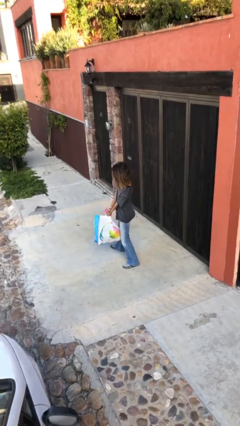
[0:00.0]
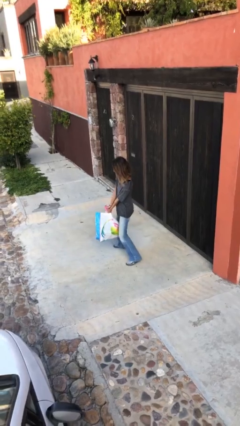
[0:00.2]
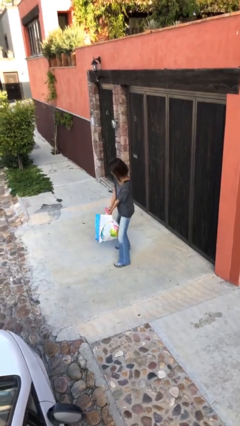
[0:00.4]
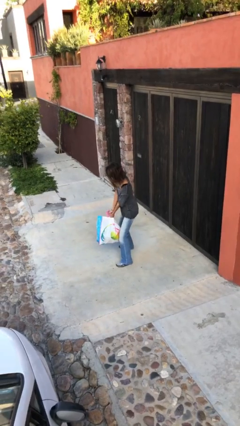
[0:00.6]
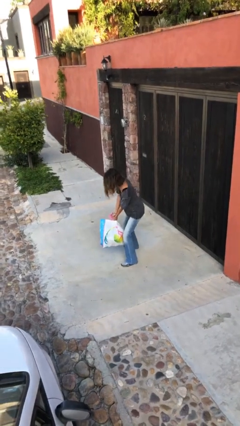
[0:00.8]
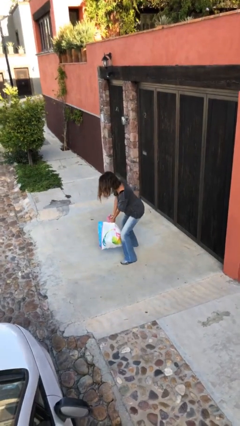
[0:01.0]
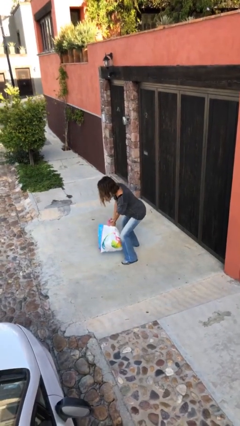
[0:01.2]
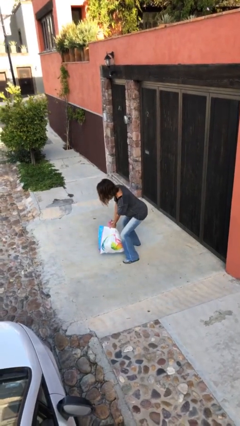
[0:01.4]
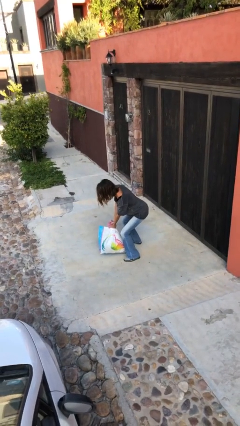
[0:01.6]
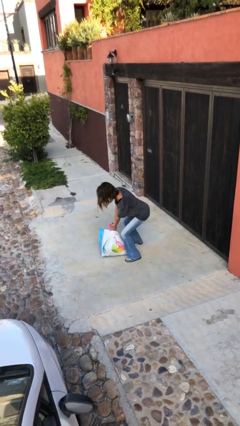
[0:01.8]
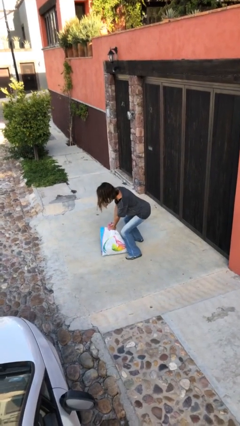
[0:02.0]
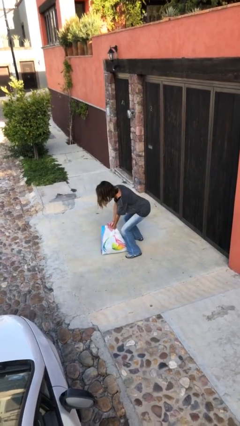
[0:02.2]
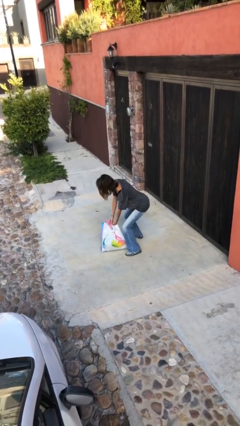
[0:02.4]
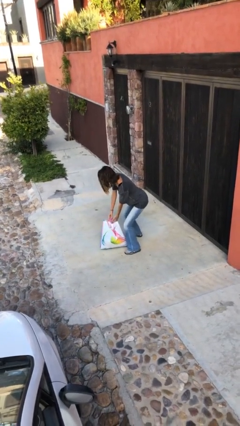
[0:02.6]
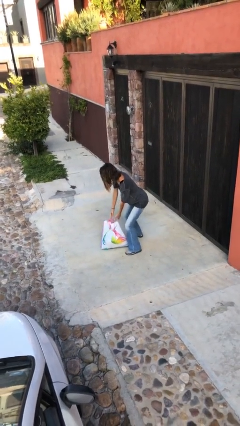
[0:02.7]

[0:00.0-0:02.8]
person puts down object on floor

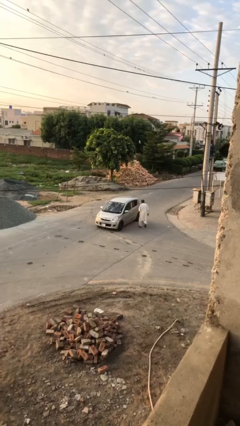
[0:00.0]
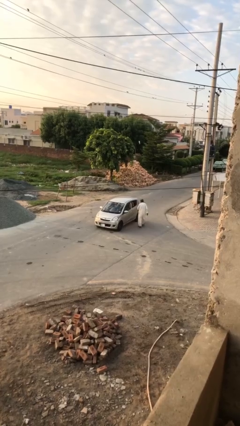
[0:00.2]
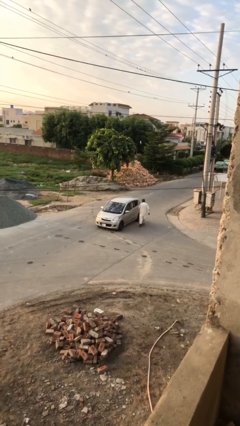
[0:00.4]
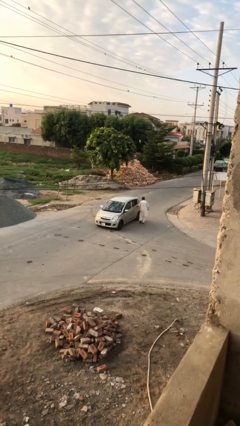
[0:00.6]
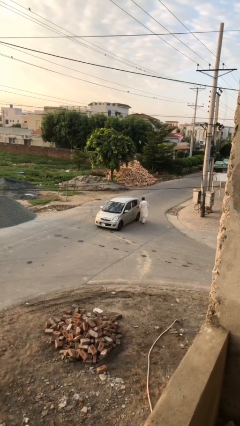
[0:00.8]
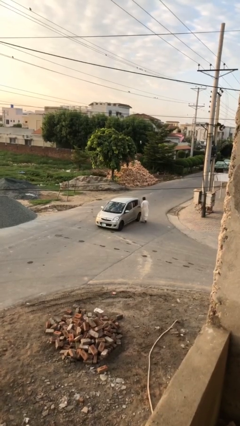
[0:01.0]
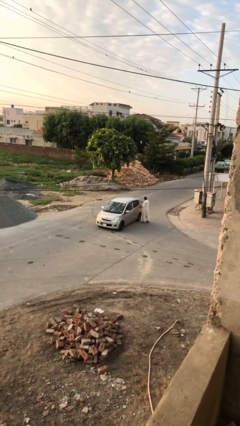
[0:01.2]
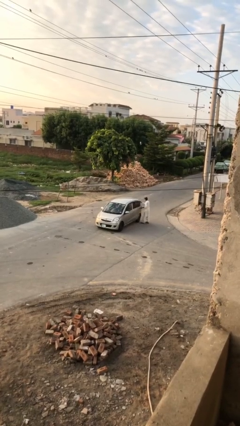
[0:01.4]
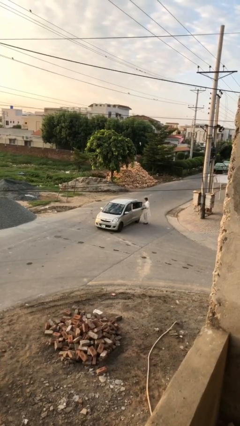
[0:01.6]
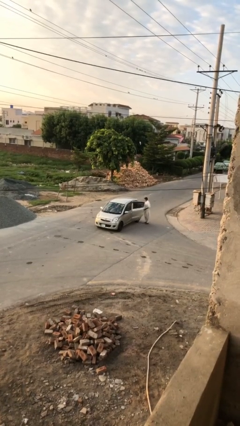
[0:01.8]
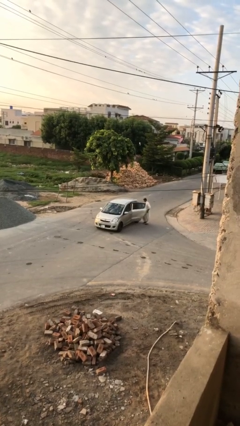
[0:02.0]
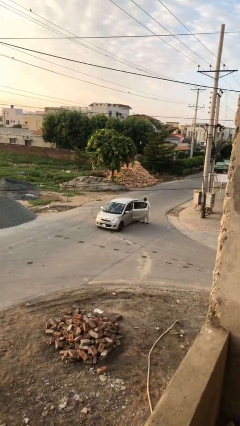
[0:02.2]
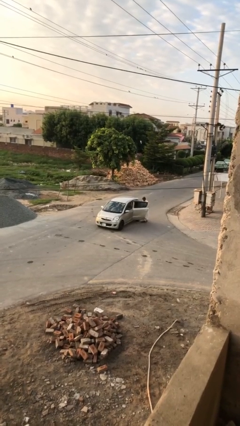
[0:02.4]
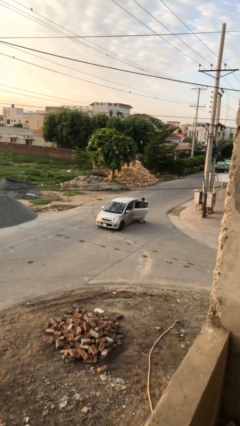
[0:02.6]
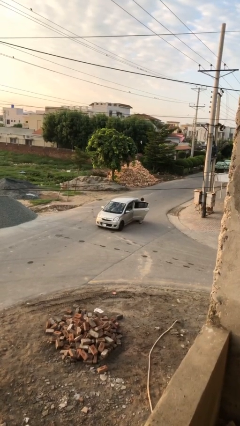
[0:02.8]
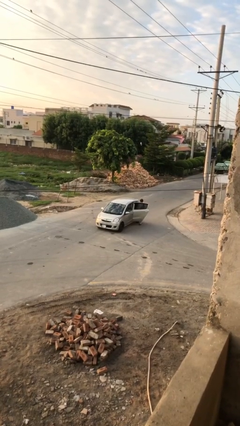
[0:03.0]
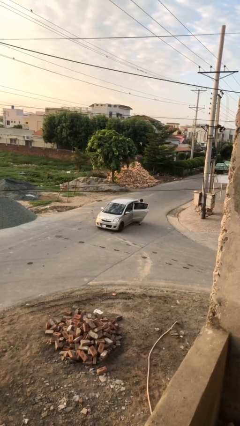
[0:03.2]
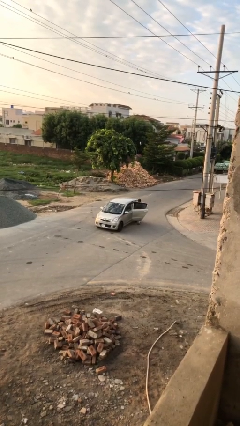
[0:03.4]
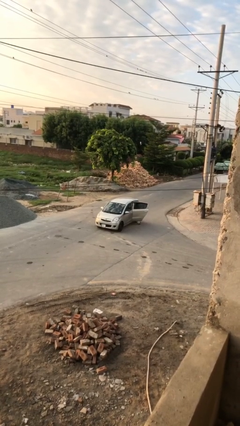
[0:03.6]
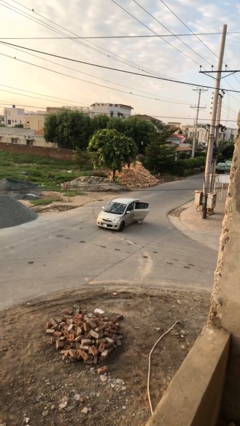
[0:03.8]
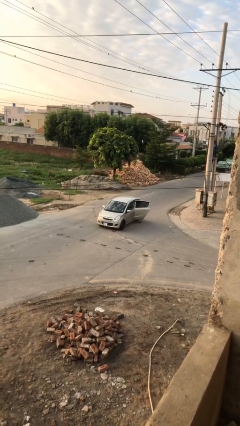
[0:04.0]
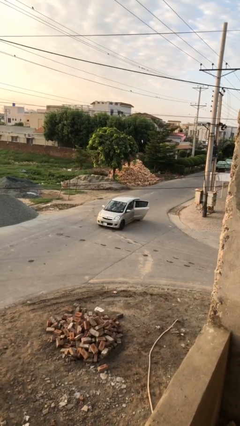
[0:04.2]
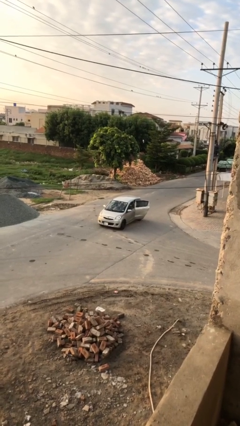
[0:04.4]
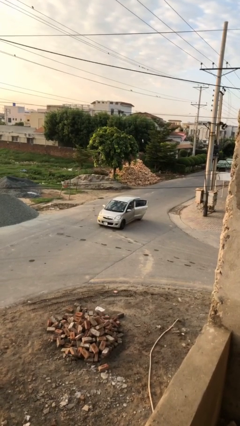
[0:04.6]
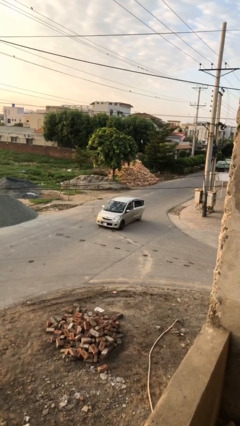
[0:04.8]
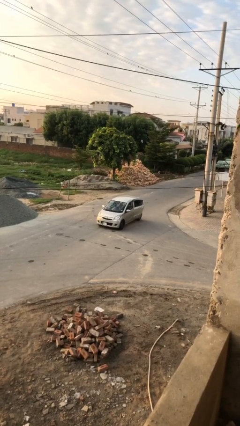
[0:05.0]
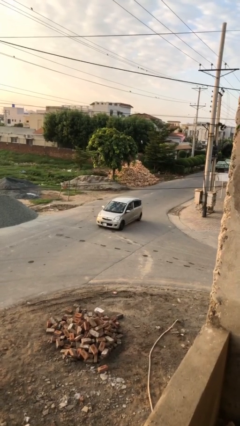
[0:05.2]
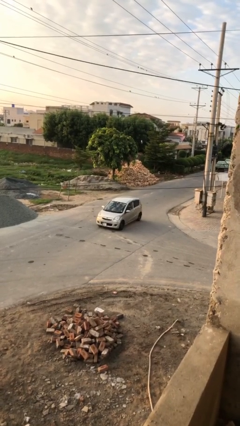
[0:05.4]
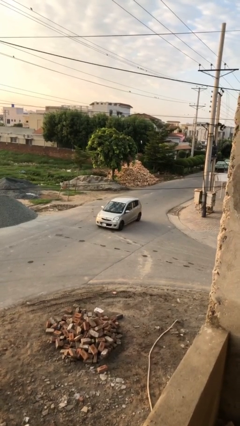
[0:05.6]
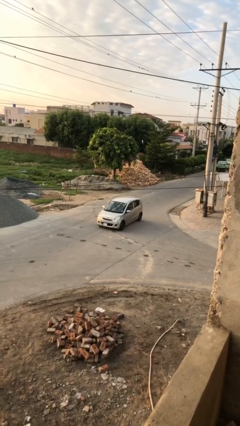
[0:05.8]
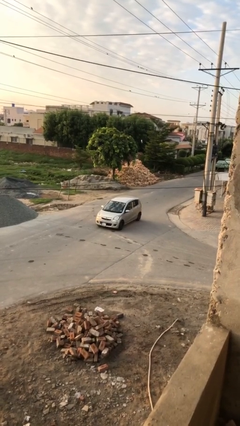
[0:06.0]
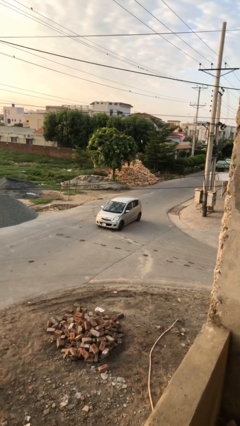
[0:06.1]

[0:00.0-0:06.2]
car picks up person

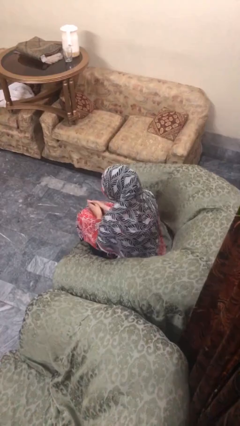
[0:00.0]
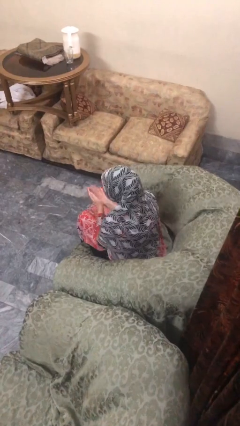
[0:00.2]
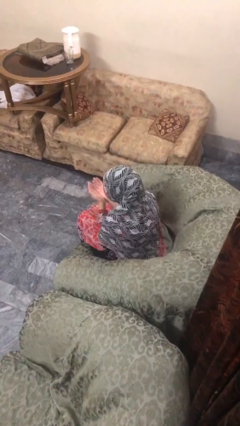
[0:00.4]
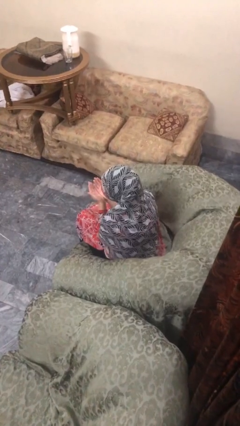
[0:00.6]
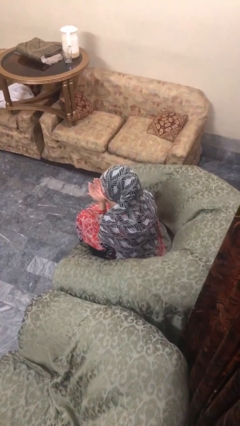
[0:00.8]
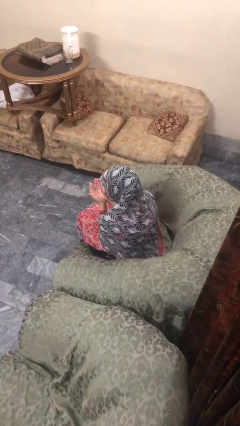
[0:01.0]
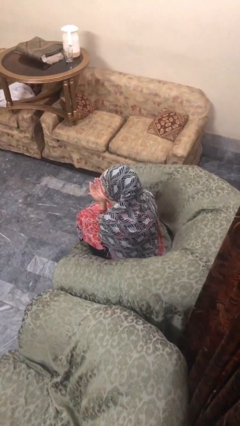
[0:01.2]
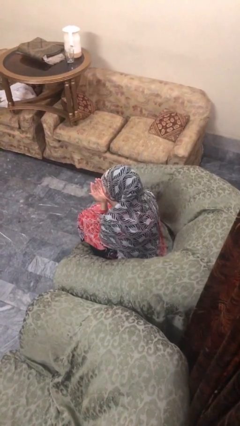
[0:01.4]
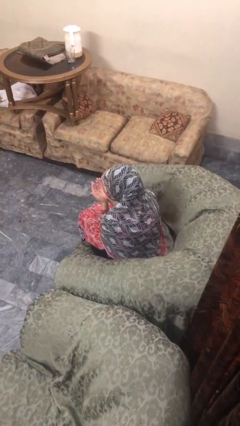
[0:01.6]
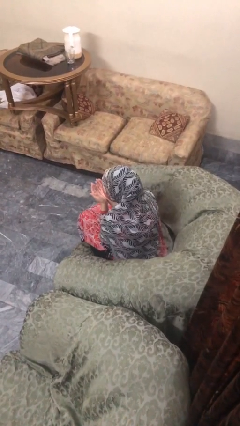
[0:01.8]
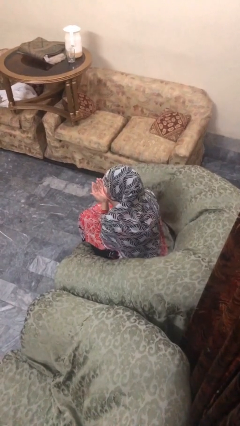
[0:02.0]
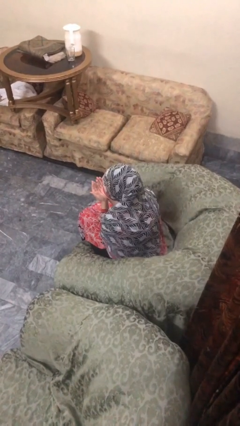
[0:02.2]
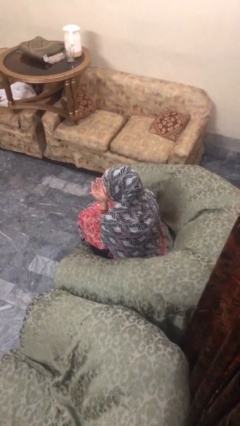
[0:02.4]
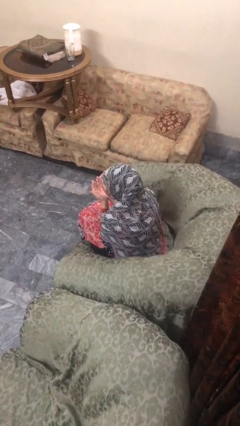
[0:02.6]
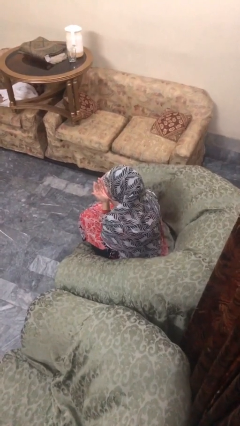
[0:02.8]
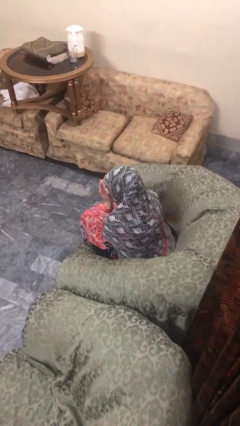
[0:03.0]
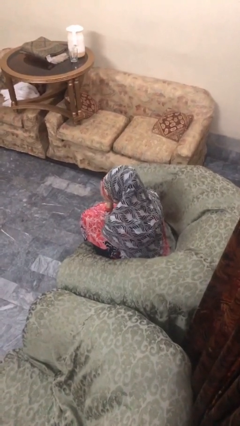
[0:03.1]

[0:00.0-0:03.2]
person prays

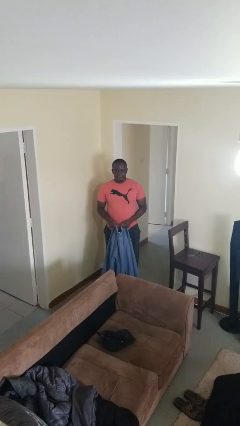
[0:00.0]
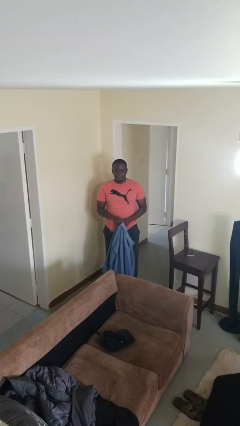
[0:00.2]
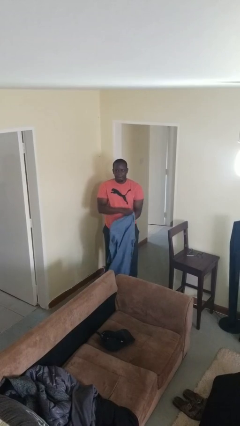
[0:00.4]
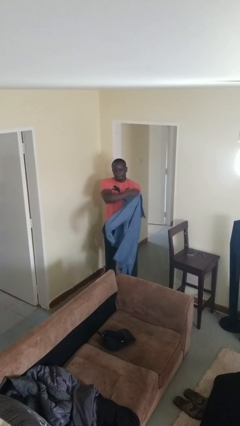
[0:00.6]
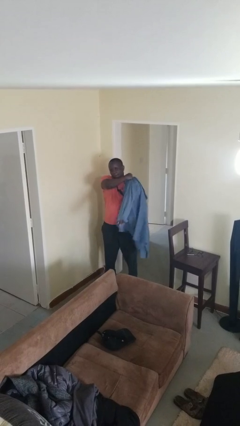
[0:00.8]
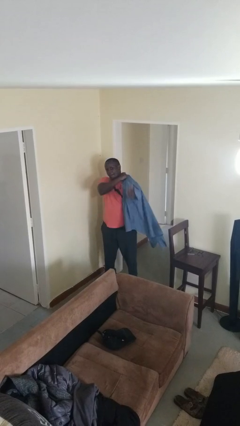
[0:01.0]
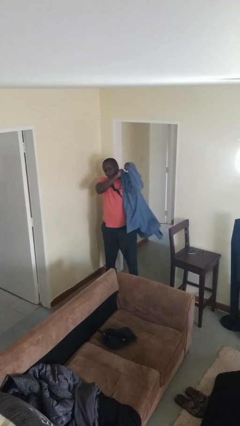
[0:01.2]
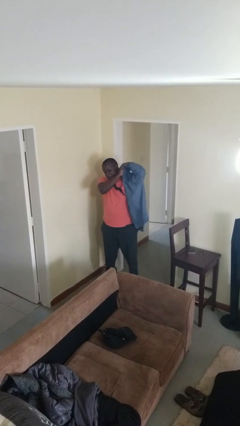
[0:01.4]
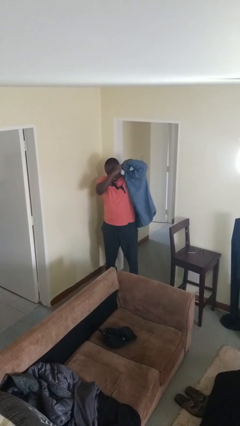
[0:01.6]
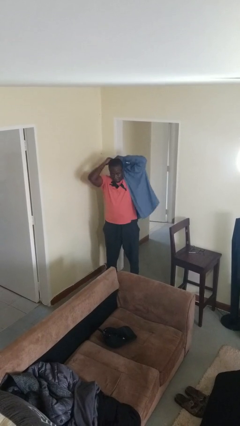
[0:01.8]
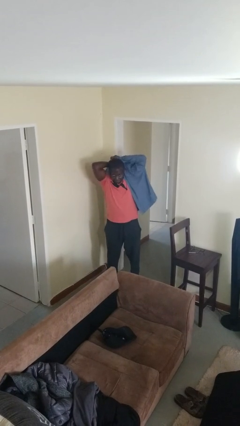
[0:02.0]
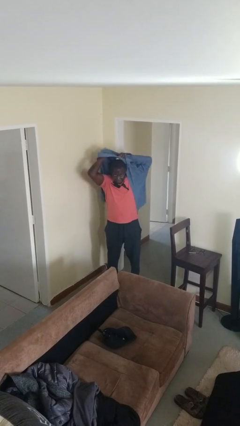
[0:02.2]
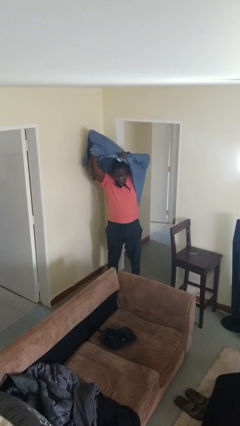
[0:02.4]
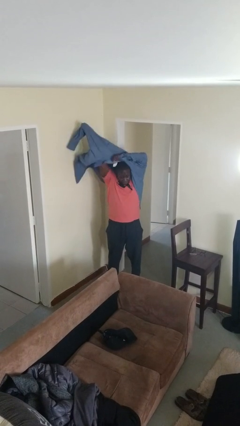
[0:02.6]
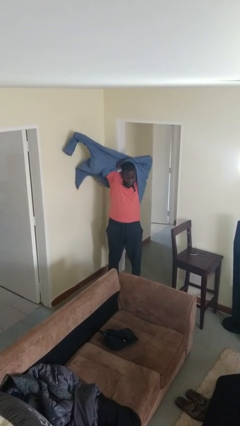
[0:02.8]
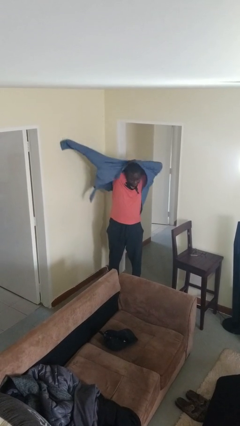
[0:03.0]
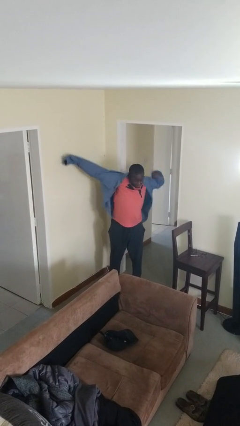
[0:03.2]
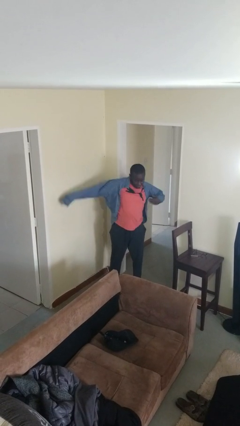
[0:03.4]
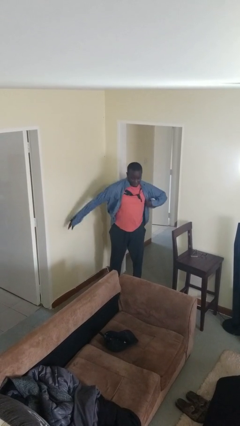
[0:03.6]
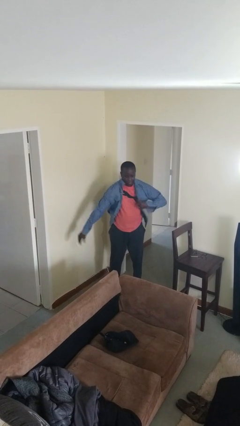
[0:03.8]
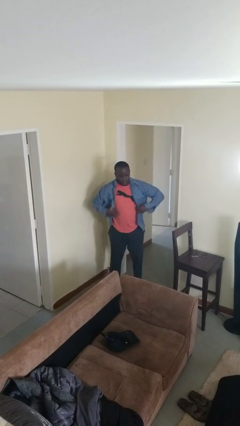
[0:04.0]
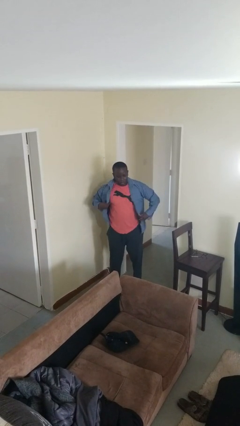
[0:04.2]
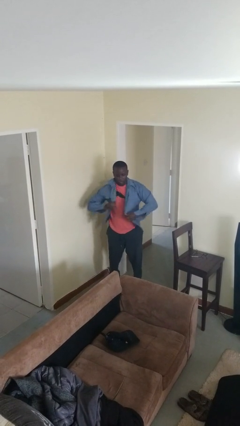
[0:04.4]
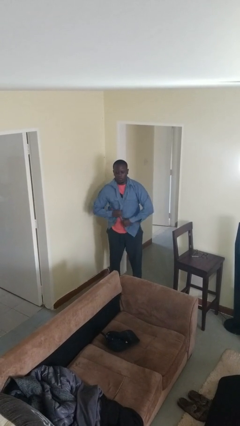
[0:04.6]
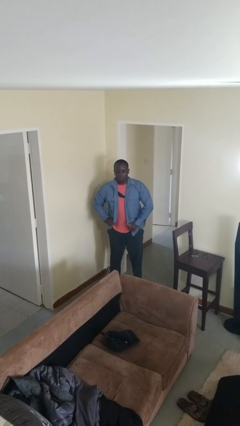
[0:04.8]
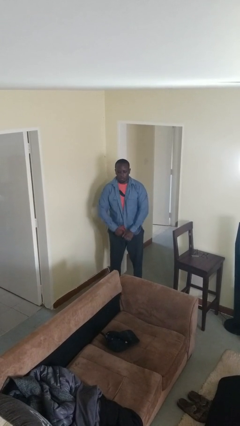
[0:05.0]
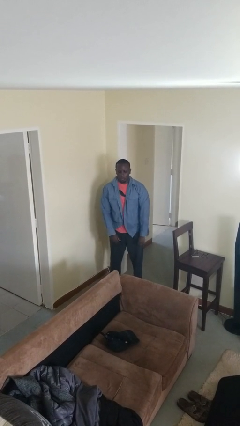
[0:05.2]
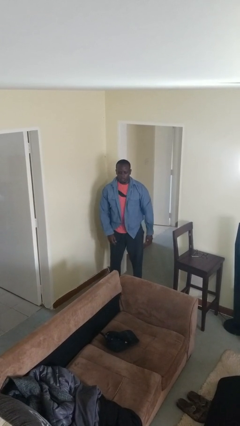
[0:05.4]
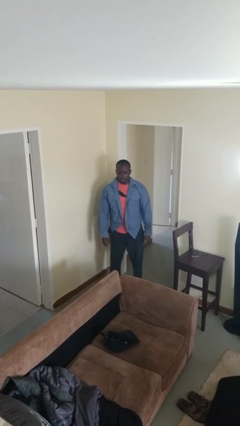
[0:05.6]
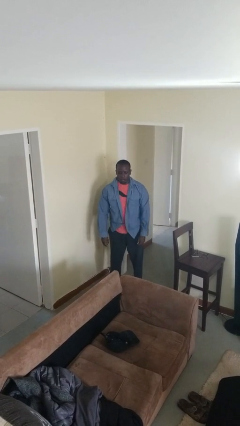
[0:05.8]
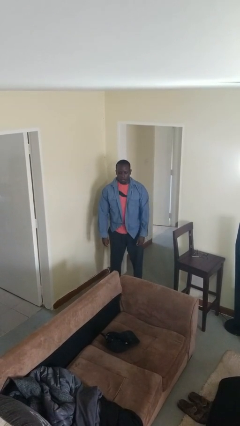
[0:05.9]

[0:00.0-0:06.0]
person puts on shirt
